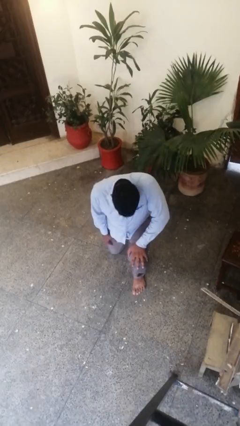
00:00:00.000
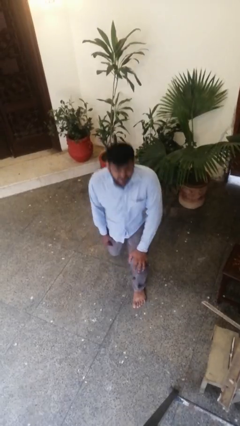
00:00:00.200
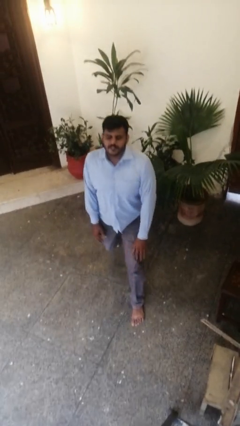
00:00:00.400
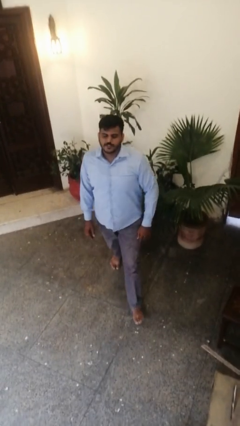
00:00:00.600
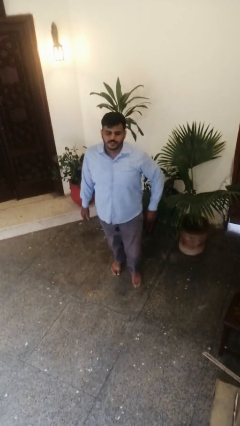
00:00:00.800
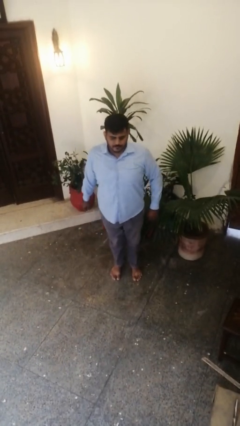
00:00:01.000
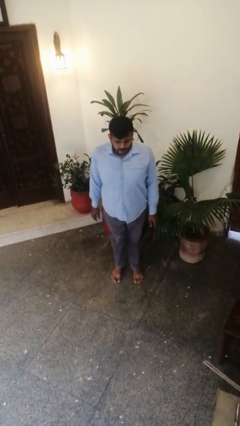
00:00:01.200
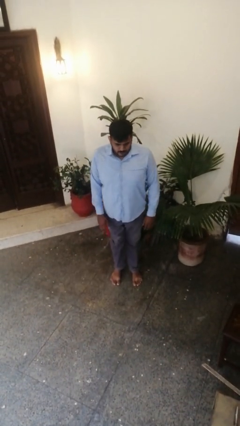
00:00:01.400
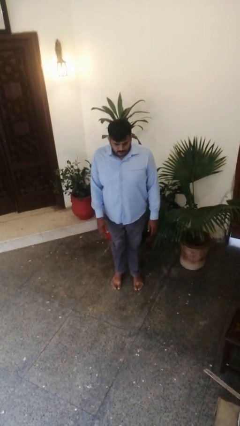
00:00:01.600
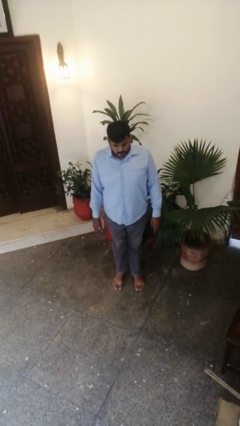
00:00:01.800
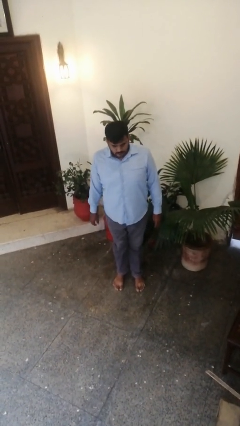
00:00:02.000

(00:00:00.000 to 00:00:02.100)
person stands up from floor

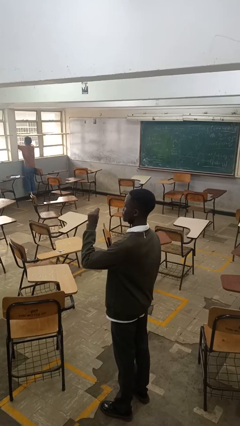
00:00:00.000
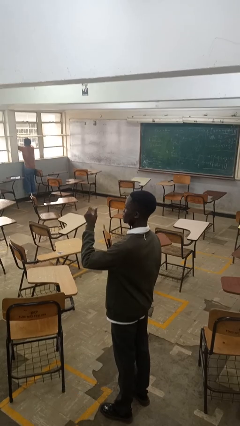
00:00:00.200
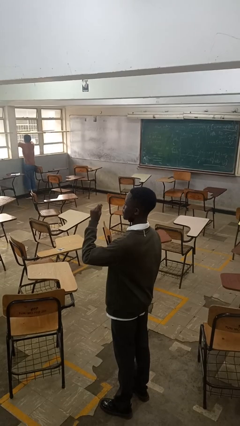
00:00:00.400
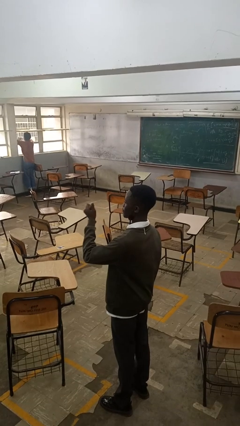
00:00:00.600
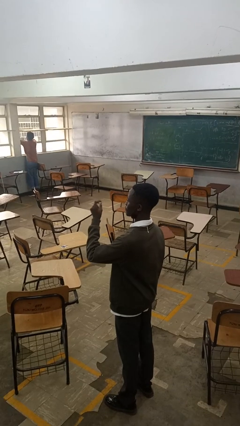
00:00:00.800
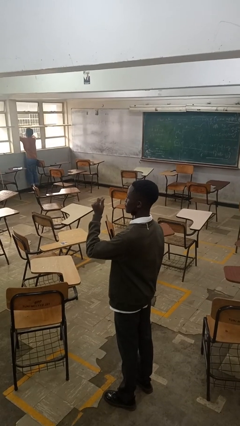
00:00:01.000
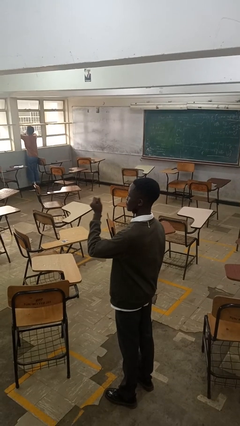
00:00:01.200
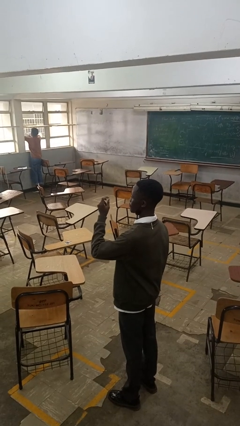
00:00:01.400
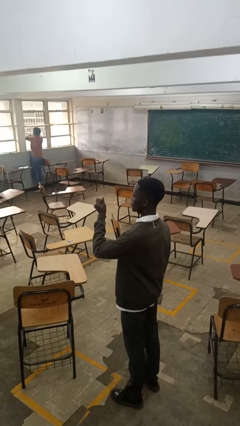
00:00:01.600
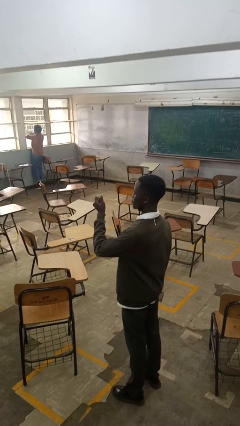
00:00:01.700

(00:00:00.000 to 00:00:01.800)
person snaps fingers

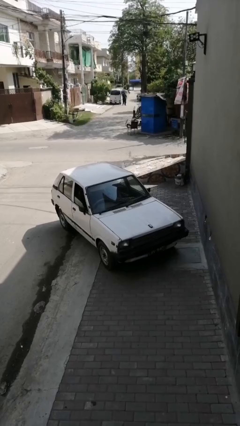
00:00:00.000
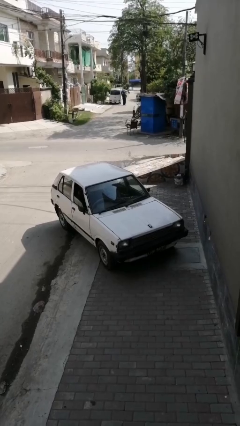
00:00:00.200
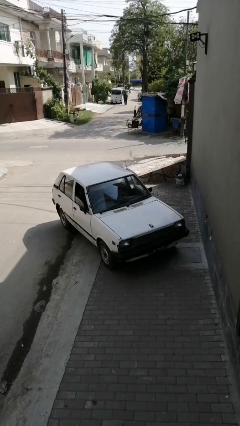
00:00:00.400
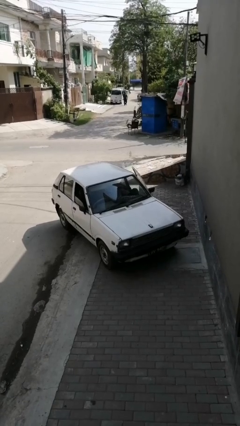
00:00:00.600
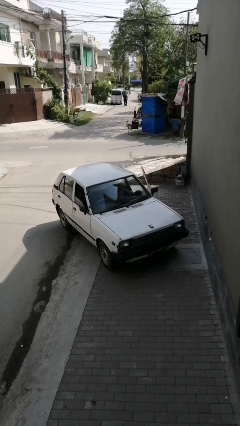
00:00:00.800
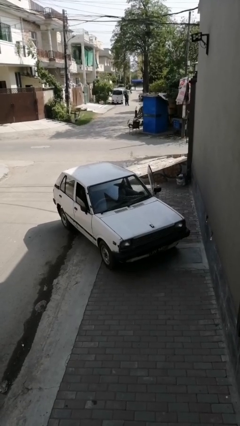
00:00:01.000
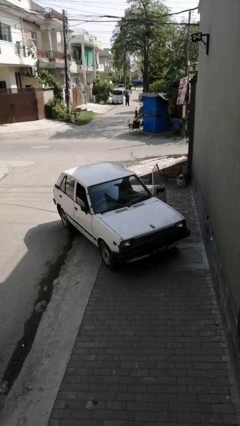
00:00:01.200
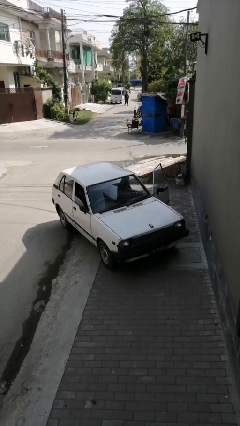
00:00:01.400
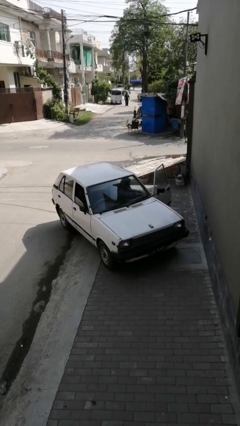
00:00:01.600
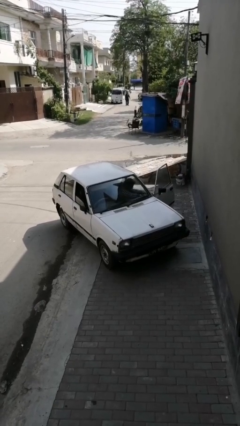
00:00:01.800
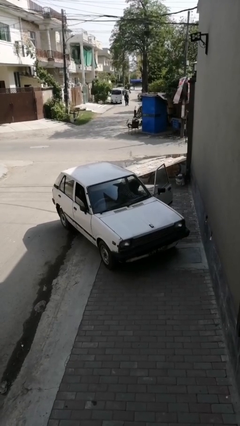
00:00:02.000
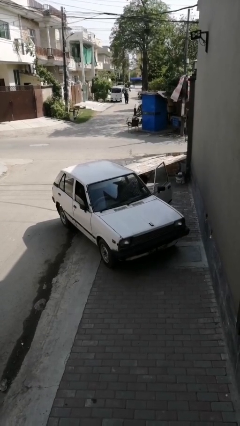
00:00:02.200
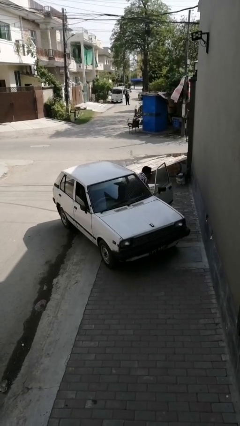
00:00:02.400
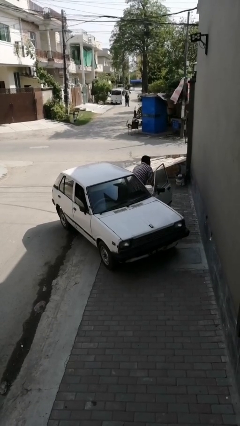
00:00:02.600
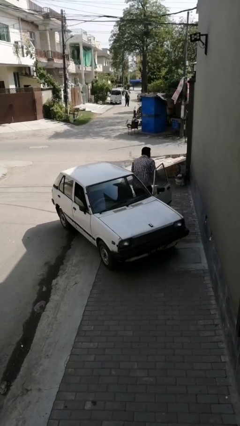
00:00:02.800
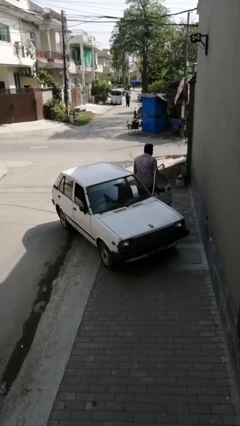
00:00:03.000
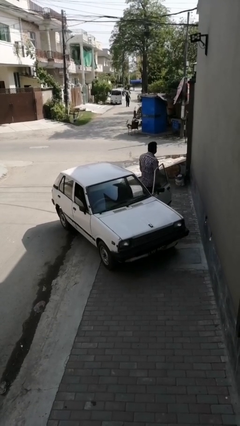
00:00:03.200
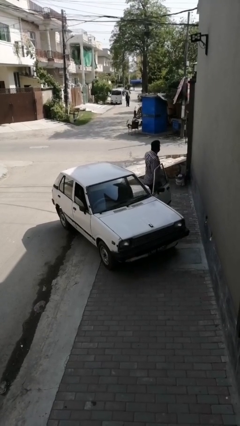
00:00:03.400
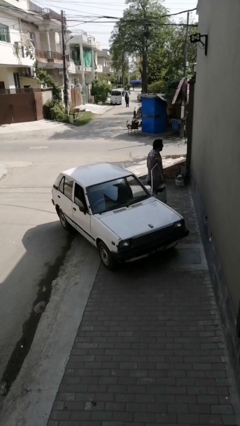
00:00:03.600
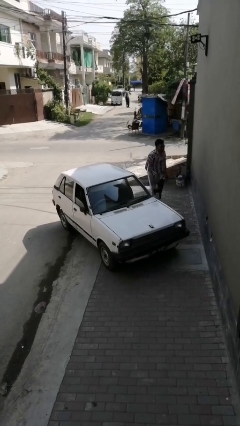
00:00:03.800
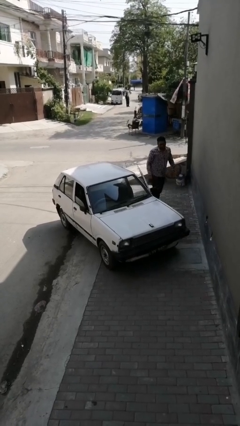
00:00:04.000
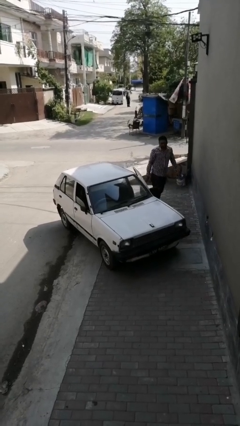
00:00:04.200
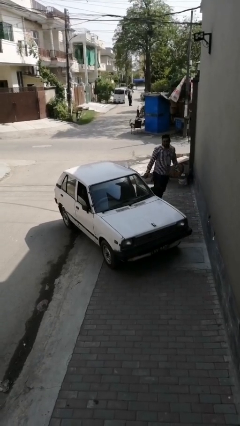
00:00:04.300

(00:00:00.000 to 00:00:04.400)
car drops off person

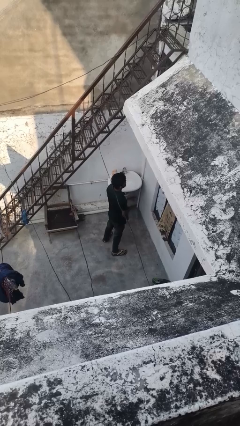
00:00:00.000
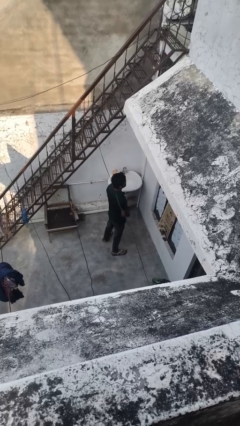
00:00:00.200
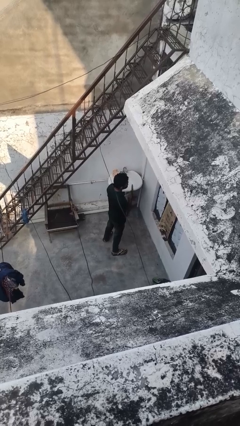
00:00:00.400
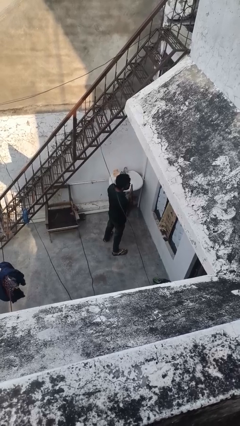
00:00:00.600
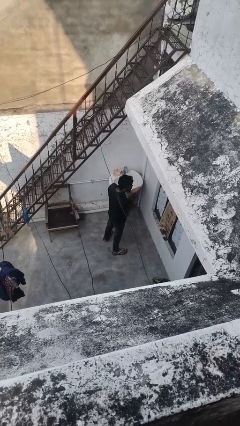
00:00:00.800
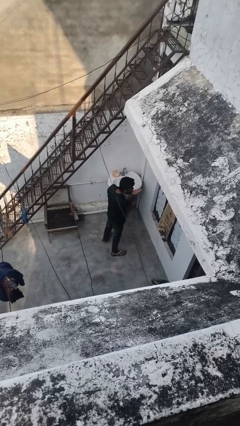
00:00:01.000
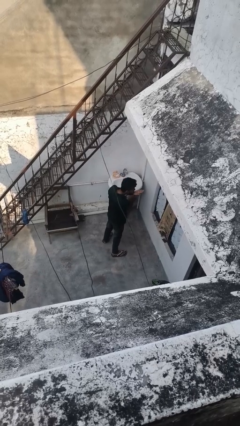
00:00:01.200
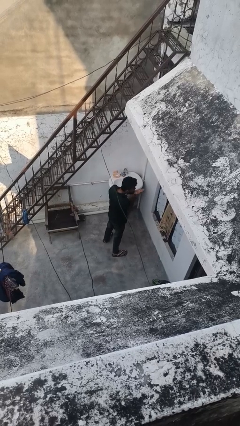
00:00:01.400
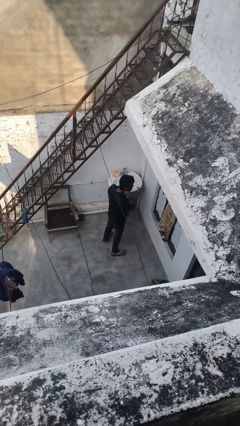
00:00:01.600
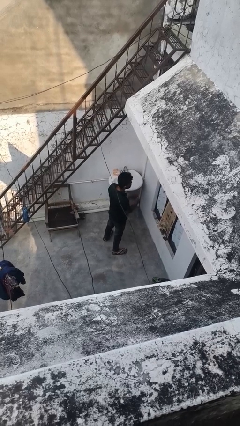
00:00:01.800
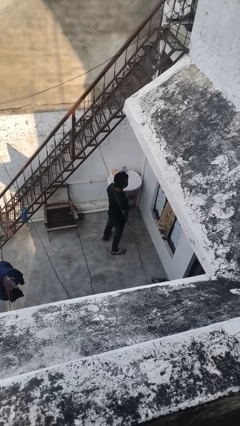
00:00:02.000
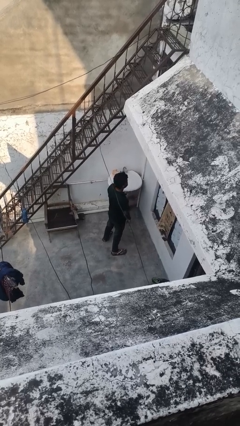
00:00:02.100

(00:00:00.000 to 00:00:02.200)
person gestures blow kiss

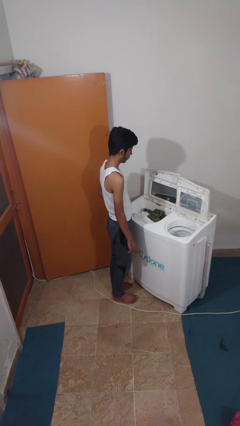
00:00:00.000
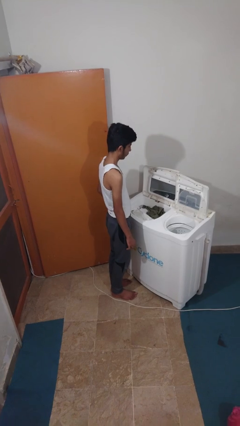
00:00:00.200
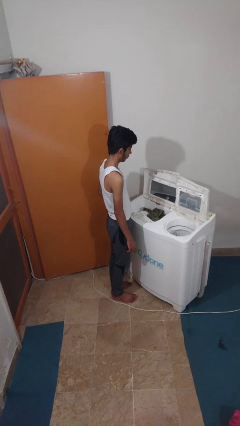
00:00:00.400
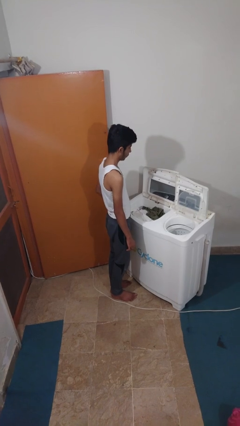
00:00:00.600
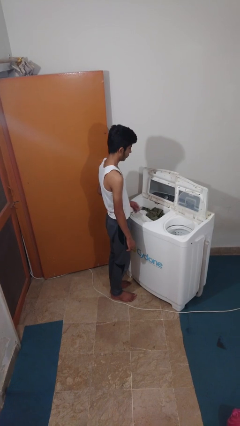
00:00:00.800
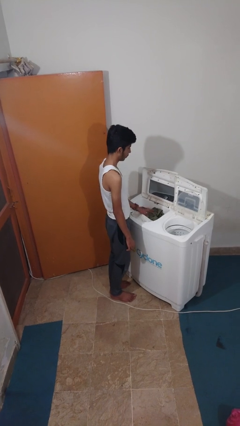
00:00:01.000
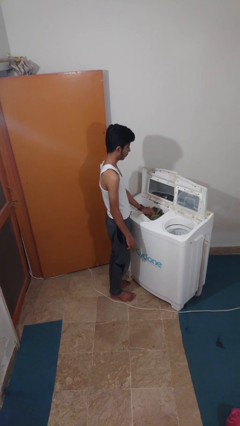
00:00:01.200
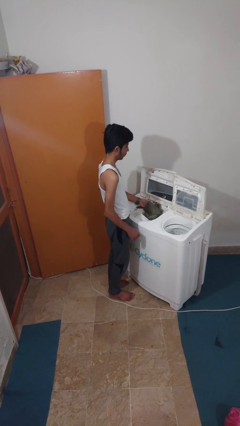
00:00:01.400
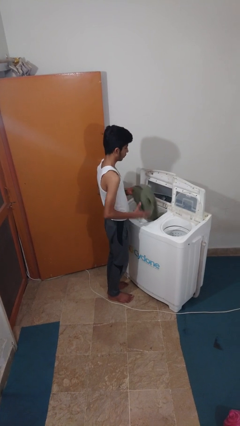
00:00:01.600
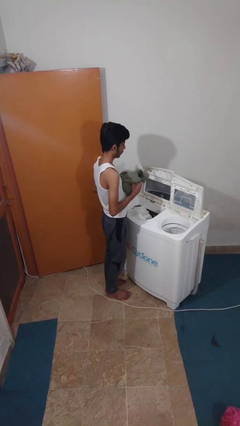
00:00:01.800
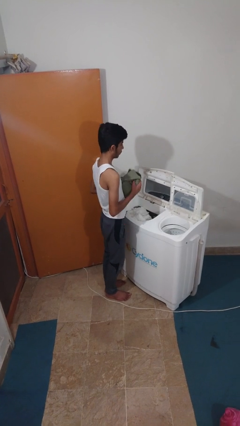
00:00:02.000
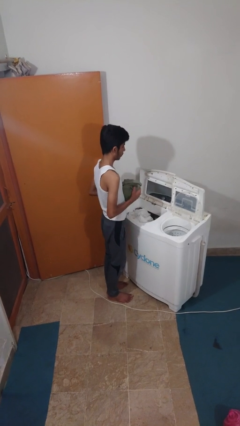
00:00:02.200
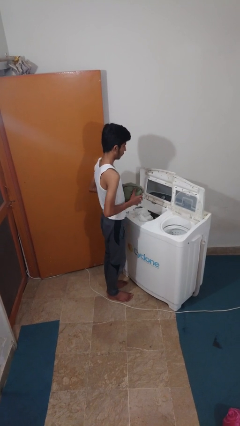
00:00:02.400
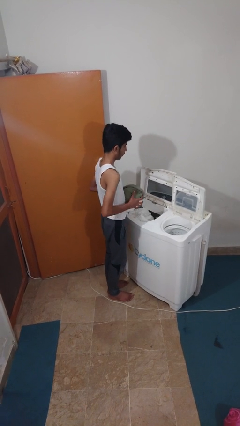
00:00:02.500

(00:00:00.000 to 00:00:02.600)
person unloads clotheswasher

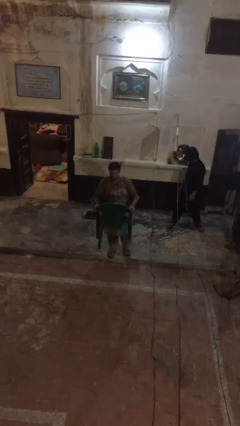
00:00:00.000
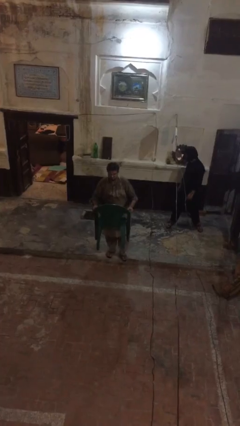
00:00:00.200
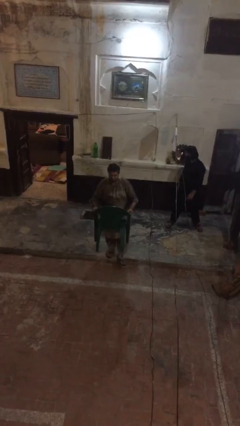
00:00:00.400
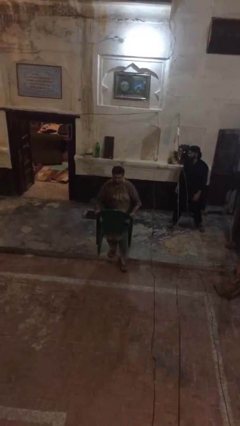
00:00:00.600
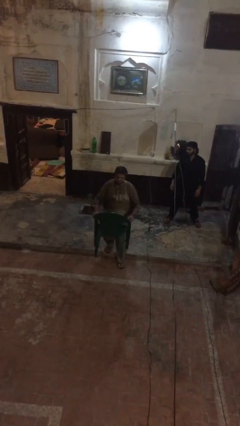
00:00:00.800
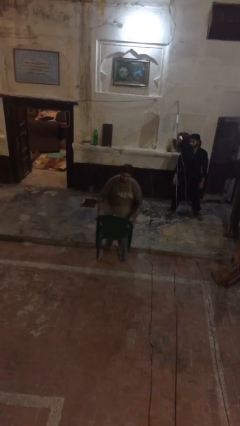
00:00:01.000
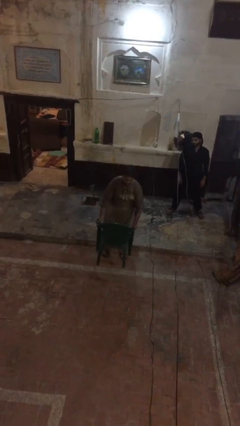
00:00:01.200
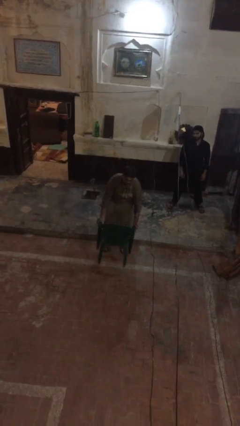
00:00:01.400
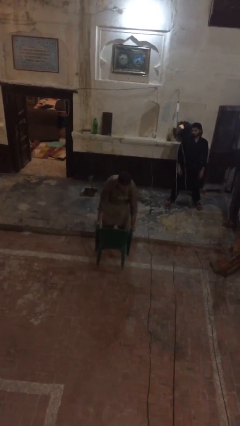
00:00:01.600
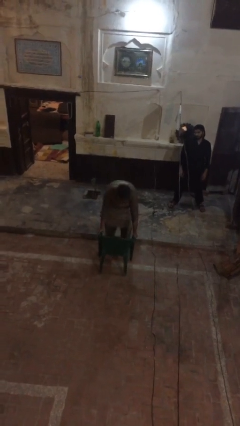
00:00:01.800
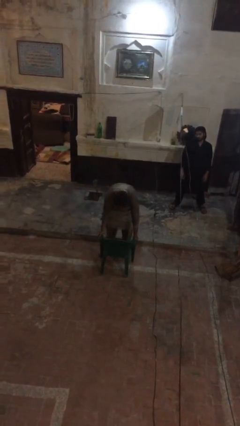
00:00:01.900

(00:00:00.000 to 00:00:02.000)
person puts down object on floor

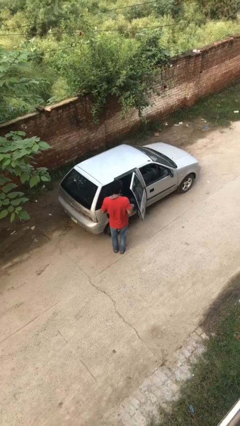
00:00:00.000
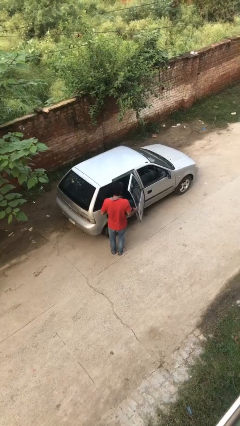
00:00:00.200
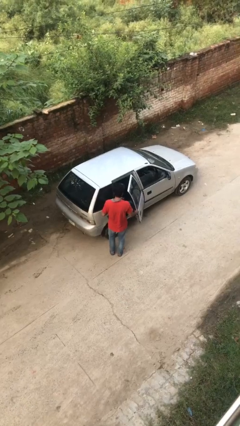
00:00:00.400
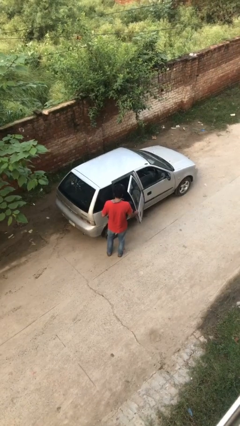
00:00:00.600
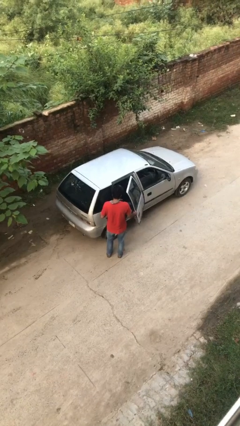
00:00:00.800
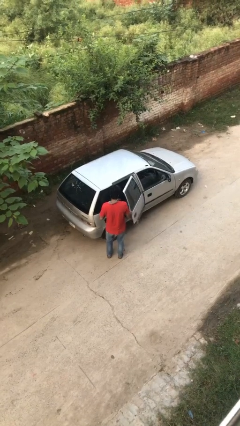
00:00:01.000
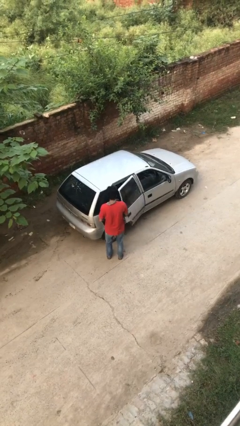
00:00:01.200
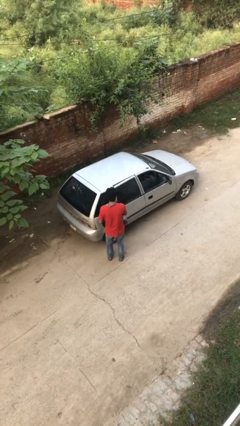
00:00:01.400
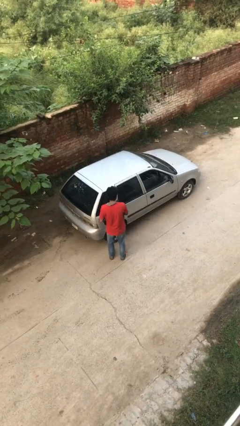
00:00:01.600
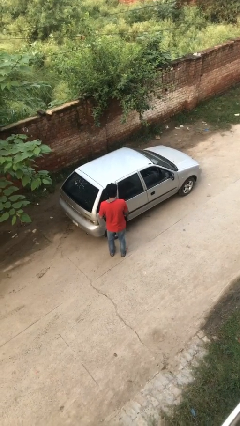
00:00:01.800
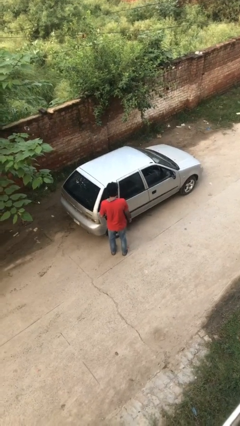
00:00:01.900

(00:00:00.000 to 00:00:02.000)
person closes car door

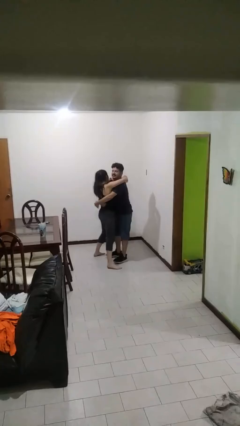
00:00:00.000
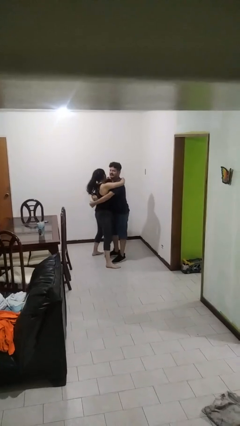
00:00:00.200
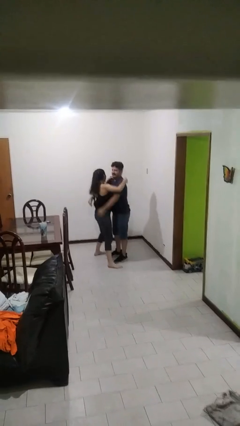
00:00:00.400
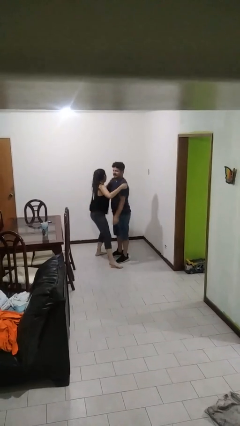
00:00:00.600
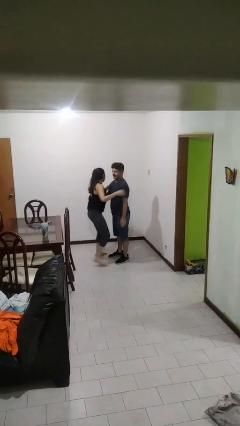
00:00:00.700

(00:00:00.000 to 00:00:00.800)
person puts down person
